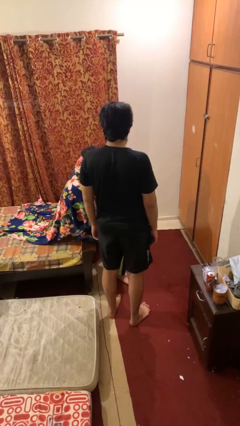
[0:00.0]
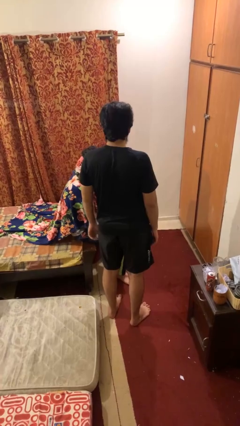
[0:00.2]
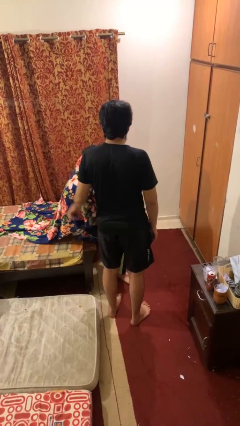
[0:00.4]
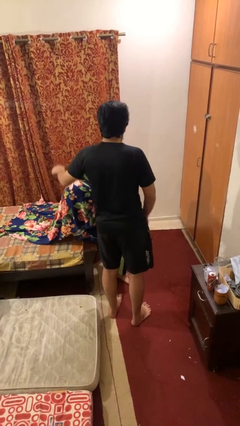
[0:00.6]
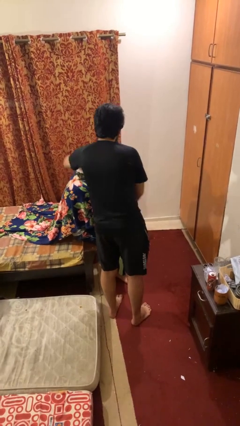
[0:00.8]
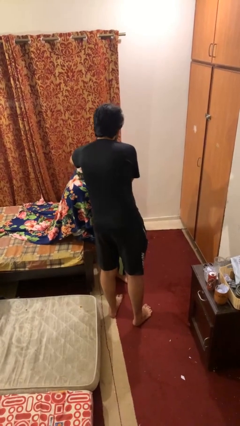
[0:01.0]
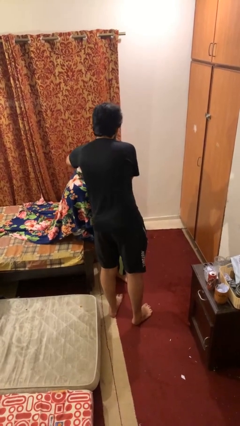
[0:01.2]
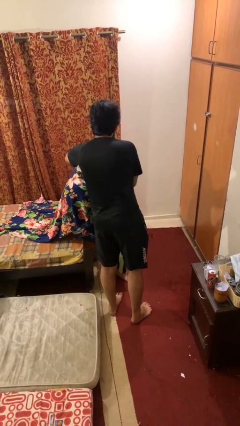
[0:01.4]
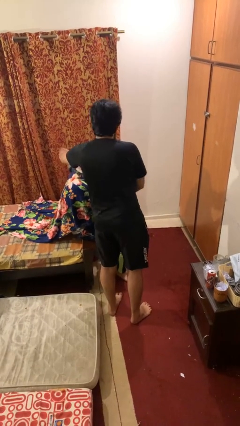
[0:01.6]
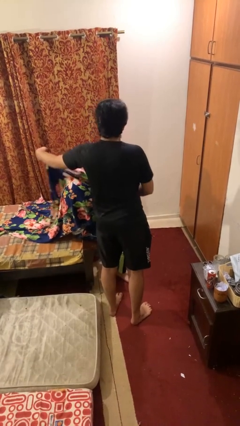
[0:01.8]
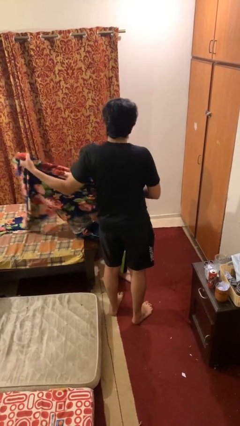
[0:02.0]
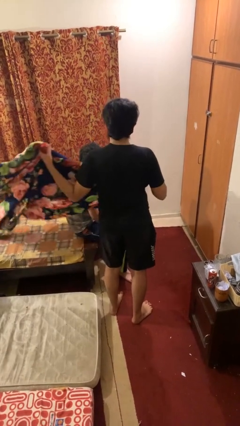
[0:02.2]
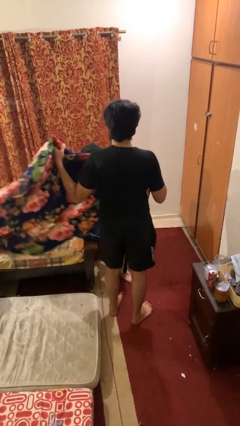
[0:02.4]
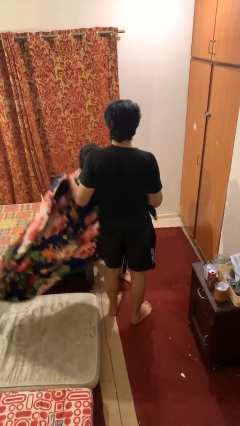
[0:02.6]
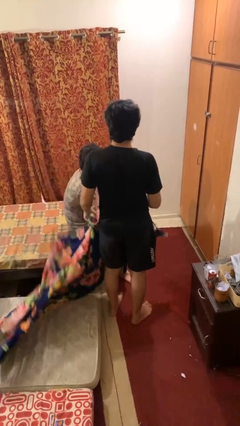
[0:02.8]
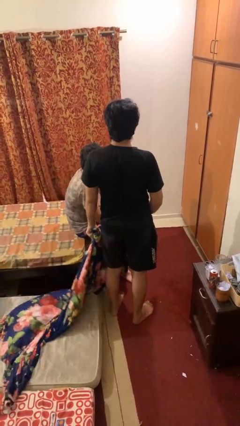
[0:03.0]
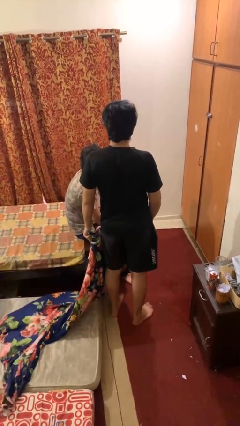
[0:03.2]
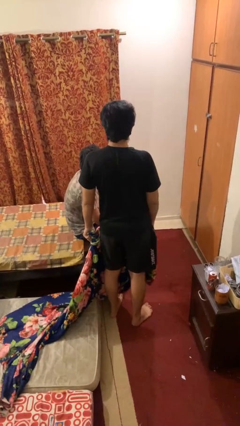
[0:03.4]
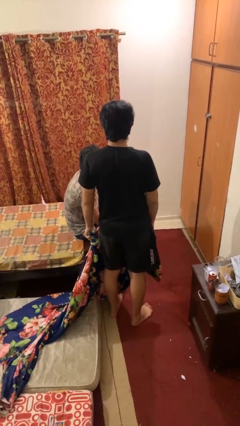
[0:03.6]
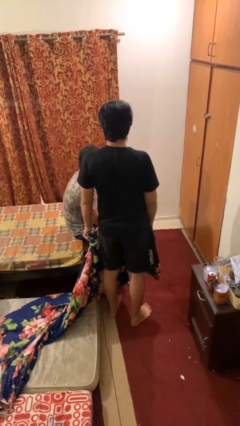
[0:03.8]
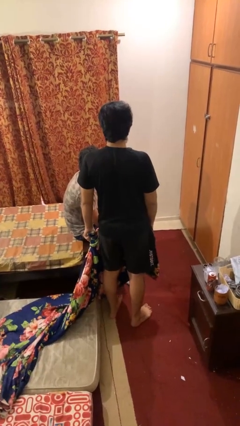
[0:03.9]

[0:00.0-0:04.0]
person uncovers friend with blanket

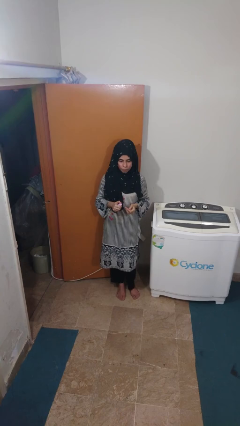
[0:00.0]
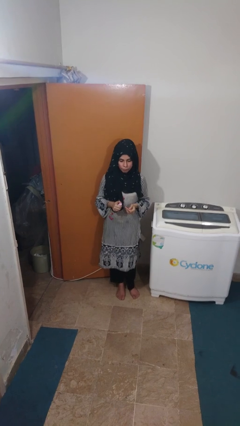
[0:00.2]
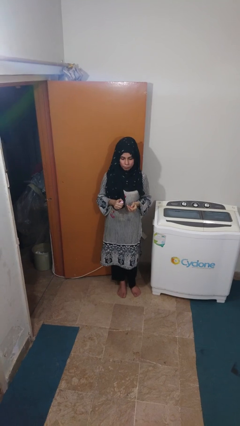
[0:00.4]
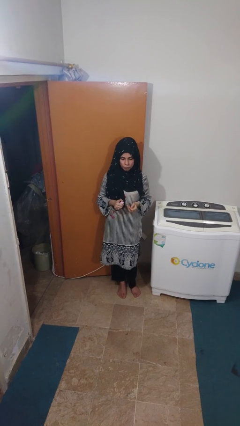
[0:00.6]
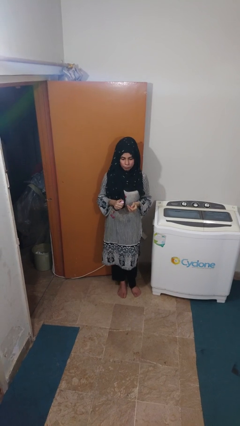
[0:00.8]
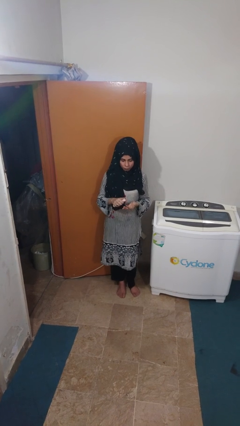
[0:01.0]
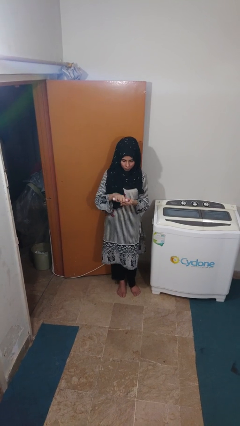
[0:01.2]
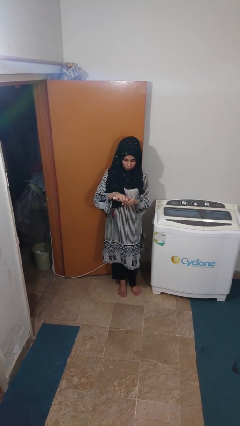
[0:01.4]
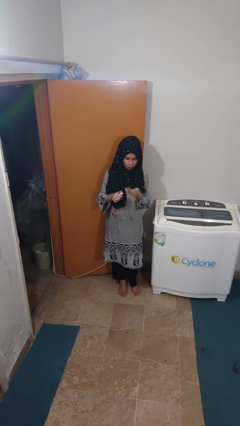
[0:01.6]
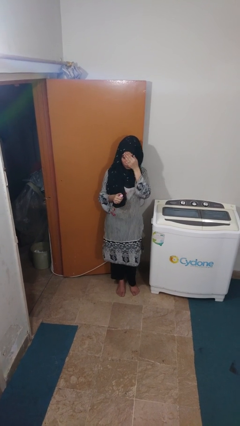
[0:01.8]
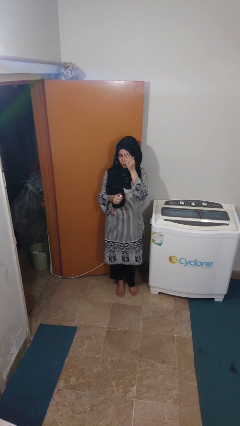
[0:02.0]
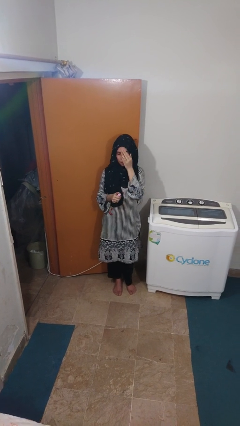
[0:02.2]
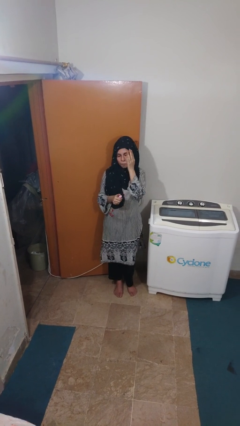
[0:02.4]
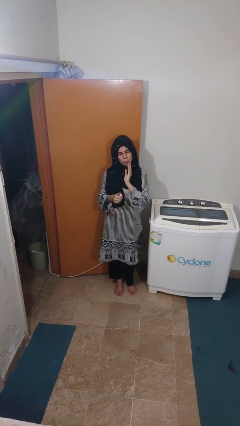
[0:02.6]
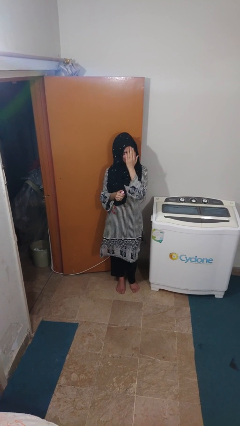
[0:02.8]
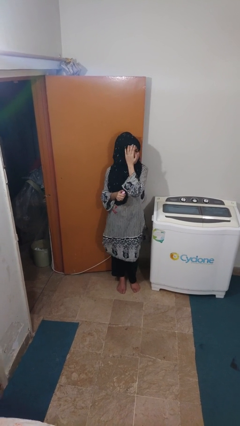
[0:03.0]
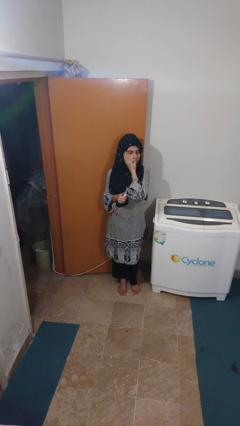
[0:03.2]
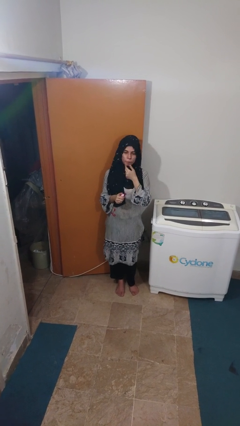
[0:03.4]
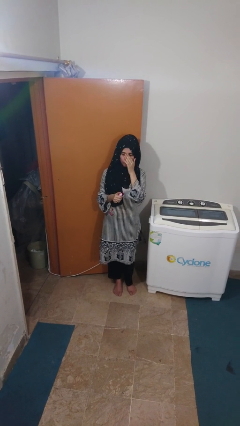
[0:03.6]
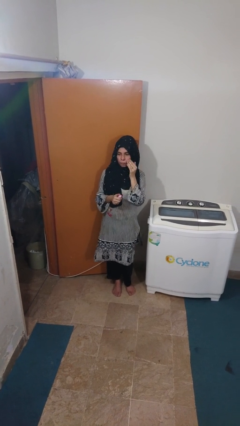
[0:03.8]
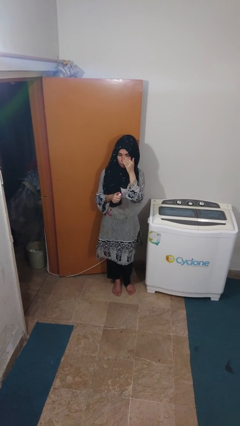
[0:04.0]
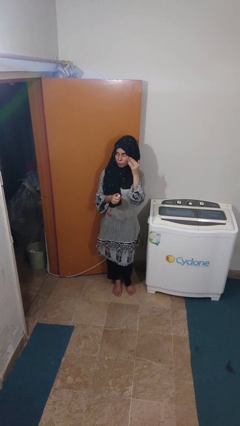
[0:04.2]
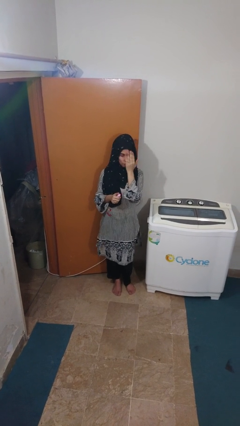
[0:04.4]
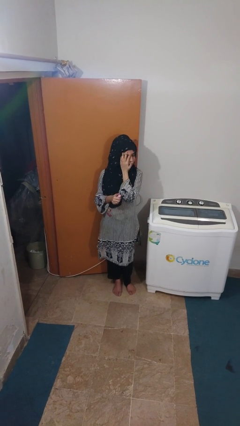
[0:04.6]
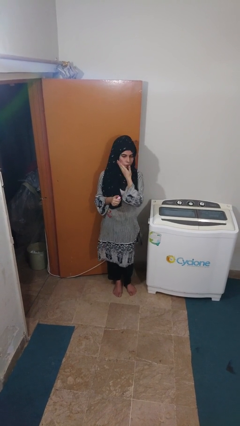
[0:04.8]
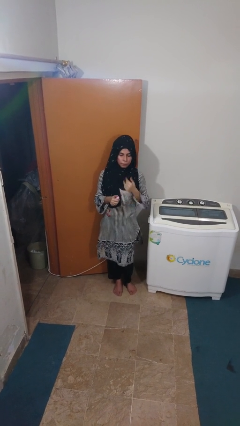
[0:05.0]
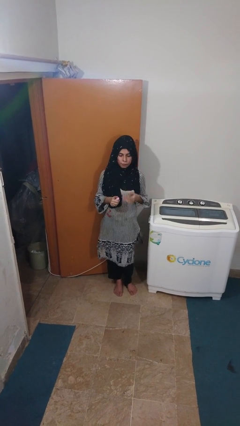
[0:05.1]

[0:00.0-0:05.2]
person applies sunscreen

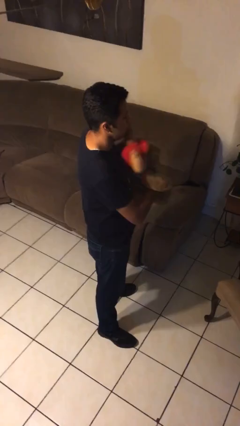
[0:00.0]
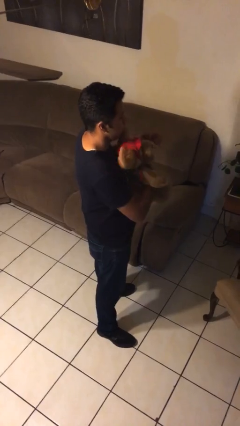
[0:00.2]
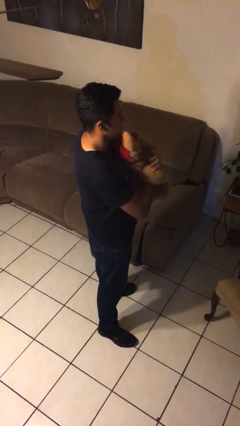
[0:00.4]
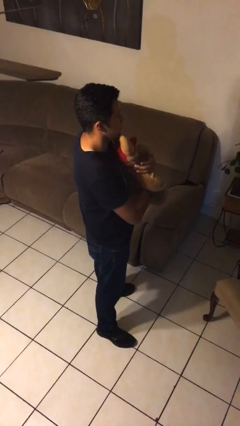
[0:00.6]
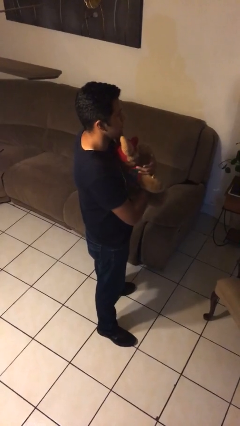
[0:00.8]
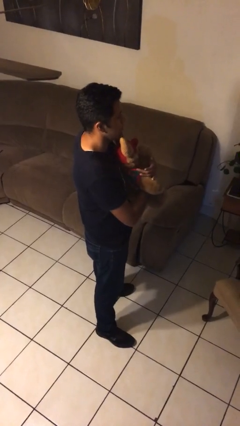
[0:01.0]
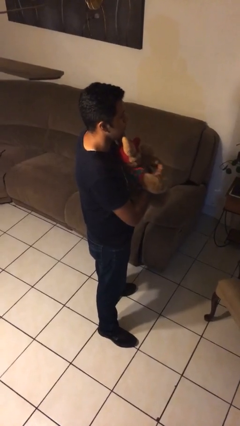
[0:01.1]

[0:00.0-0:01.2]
person hugs stuffed animal

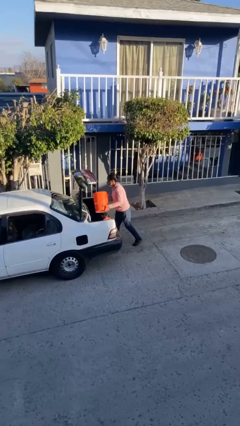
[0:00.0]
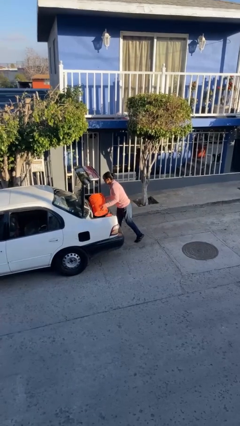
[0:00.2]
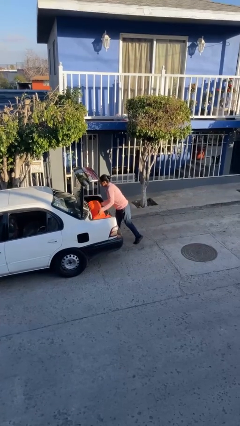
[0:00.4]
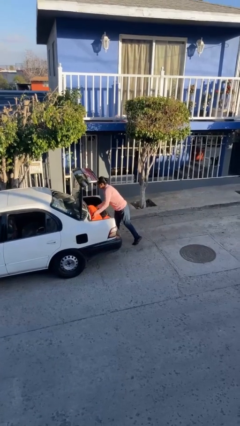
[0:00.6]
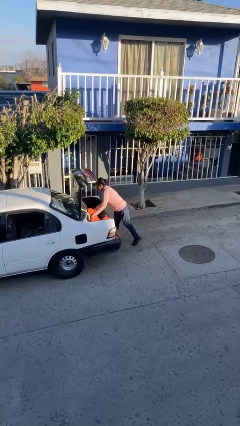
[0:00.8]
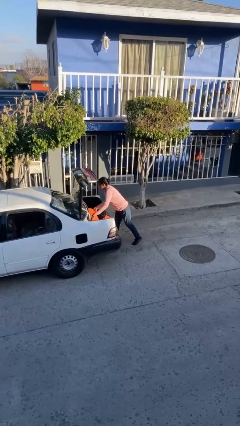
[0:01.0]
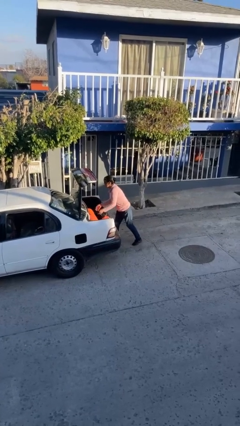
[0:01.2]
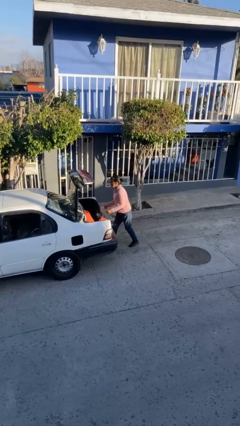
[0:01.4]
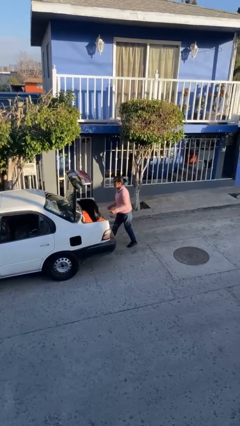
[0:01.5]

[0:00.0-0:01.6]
person loads car

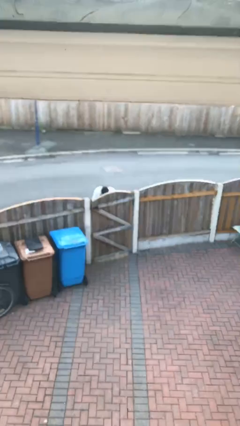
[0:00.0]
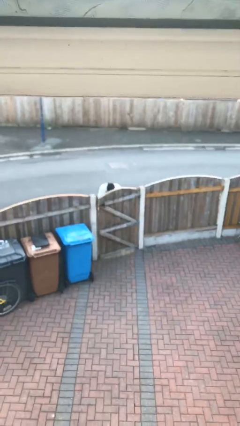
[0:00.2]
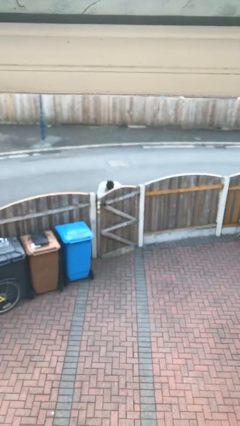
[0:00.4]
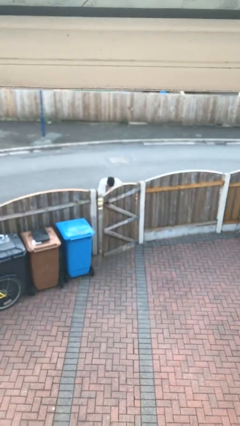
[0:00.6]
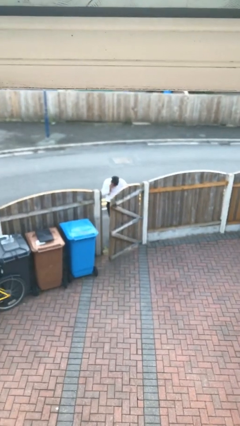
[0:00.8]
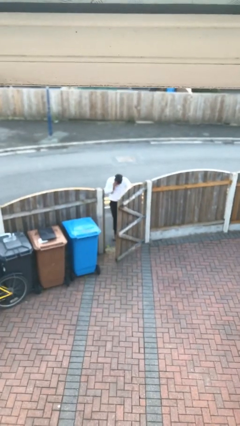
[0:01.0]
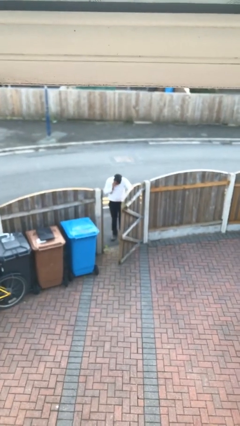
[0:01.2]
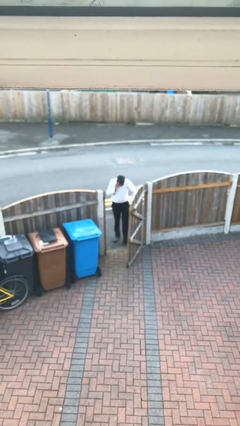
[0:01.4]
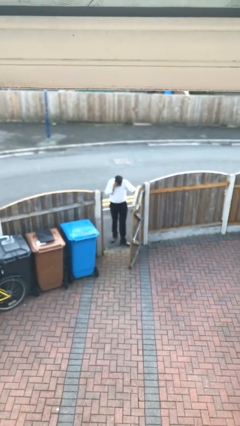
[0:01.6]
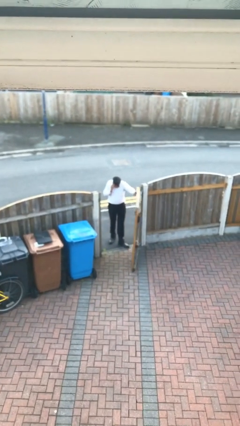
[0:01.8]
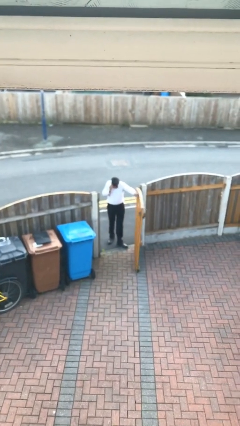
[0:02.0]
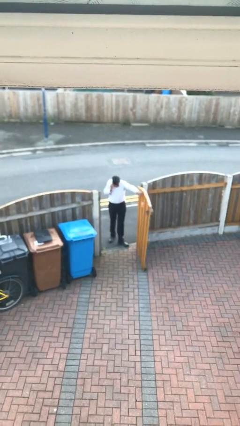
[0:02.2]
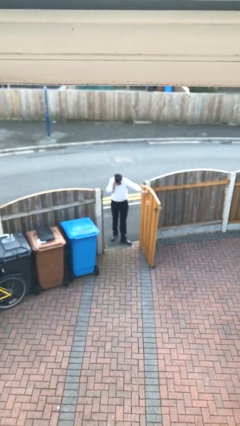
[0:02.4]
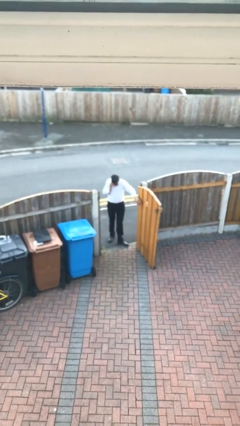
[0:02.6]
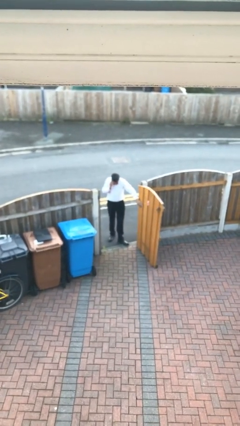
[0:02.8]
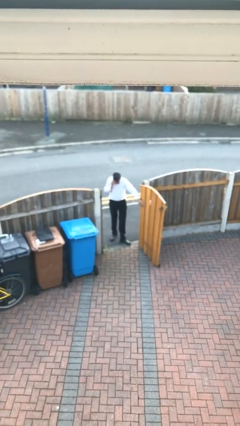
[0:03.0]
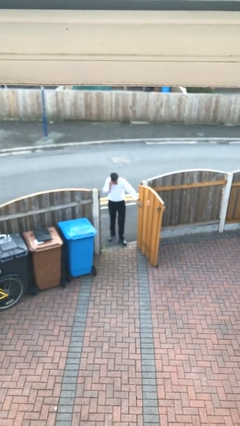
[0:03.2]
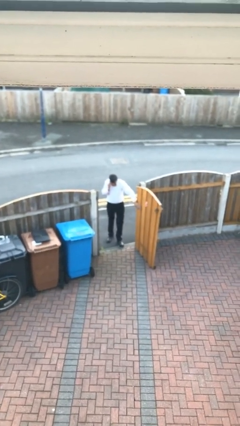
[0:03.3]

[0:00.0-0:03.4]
person opens facility door

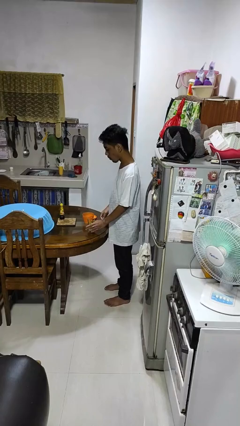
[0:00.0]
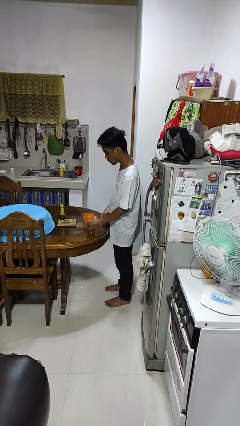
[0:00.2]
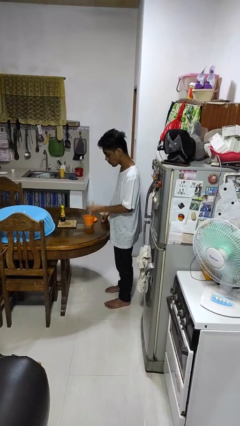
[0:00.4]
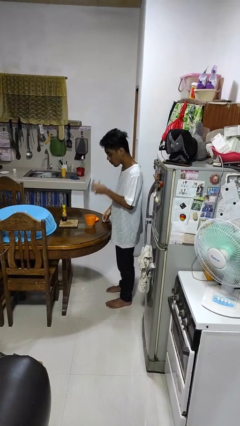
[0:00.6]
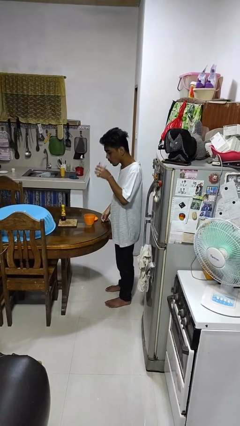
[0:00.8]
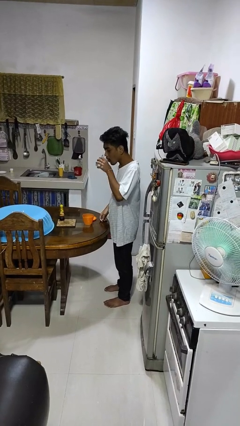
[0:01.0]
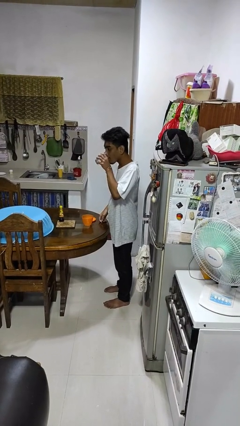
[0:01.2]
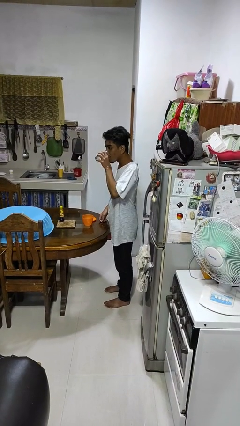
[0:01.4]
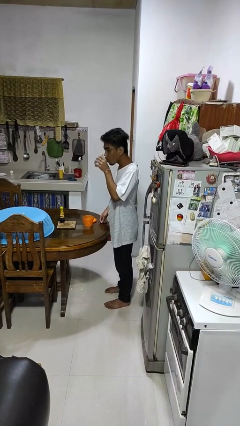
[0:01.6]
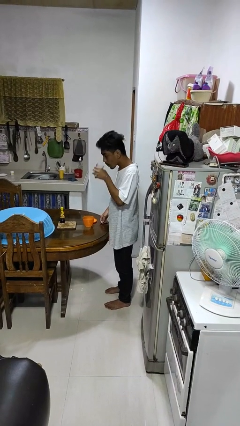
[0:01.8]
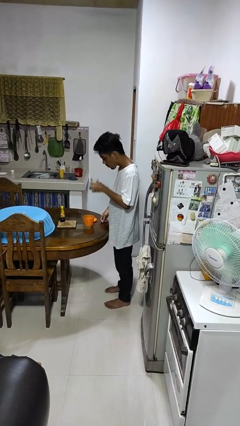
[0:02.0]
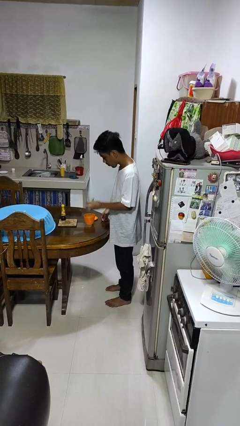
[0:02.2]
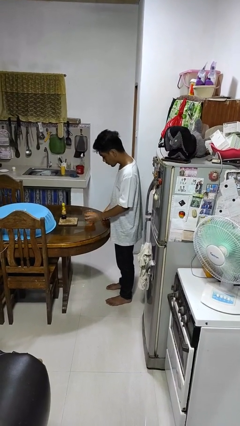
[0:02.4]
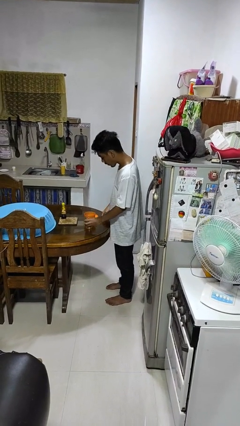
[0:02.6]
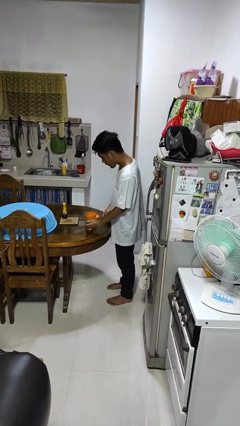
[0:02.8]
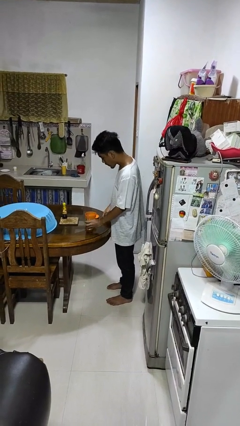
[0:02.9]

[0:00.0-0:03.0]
person drinks from cup
